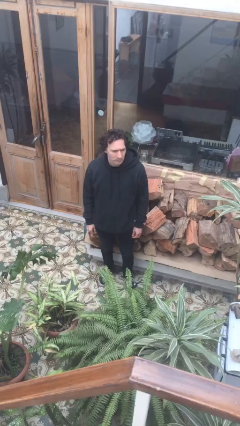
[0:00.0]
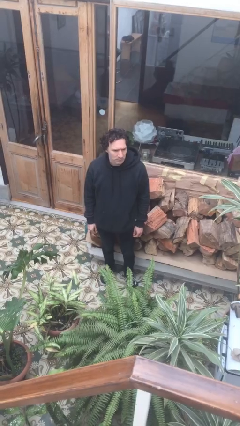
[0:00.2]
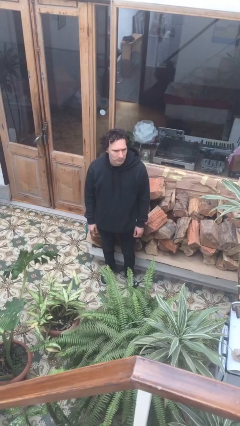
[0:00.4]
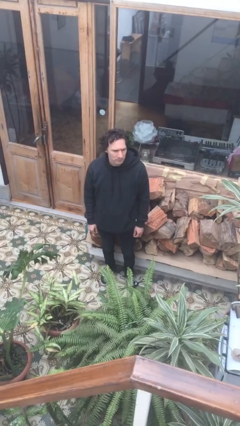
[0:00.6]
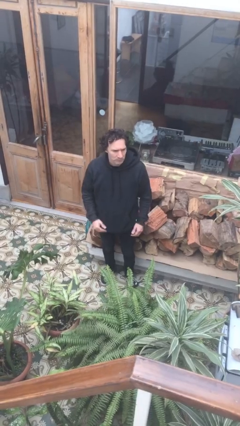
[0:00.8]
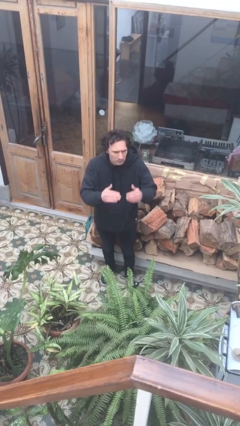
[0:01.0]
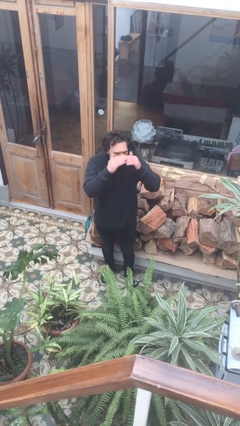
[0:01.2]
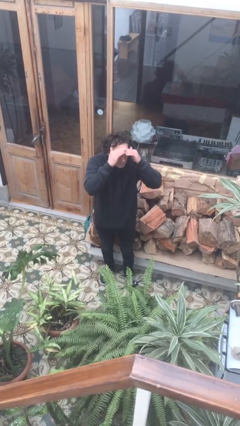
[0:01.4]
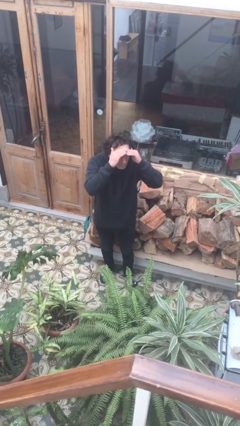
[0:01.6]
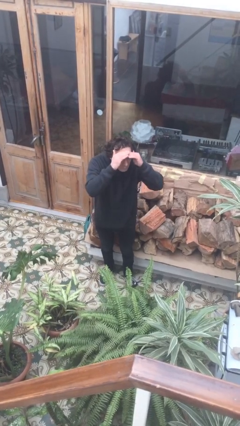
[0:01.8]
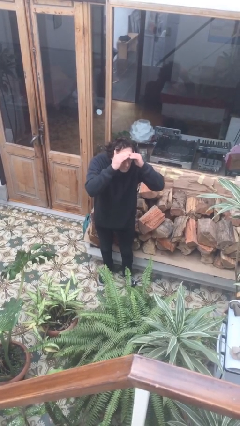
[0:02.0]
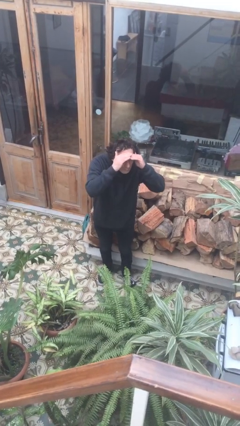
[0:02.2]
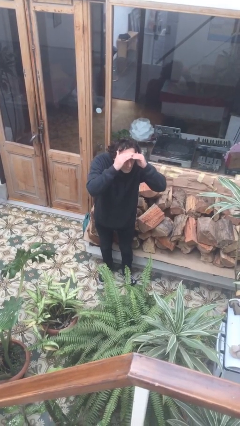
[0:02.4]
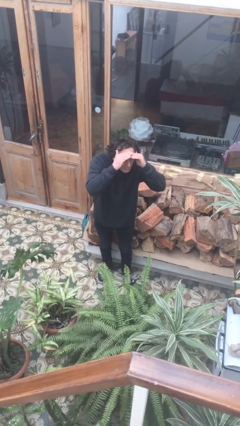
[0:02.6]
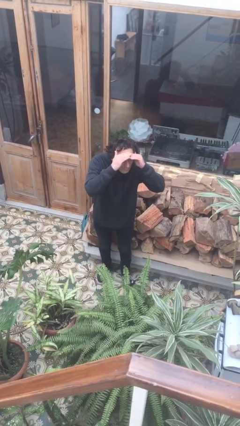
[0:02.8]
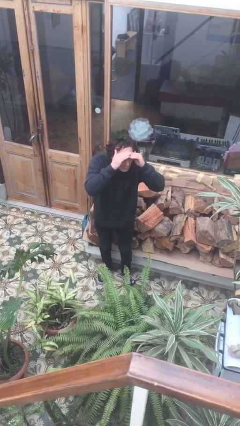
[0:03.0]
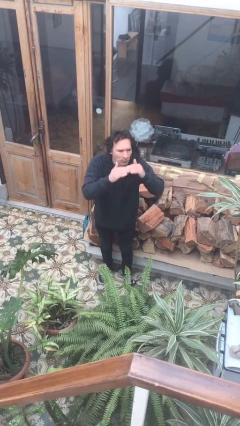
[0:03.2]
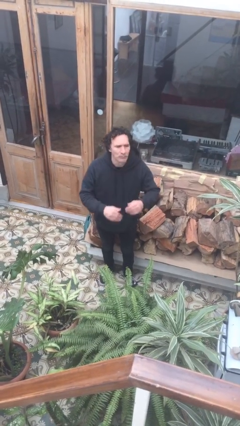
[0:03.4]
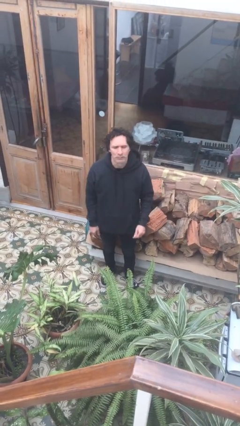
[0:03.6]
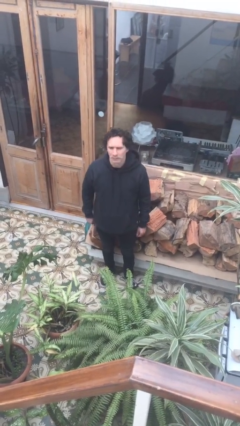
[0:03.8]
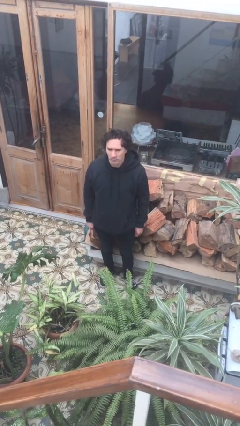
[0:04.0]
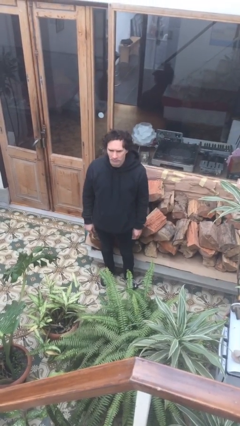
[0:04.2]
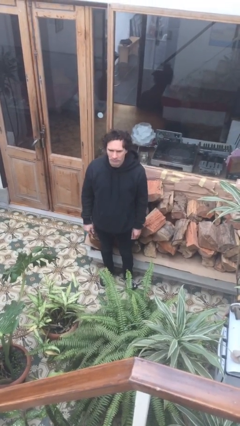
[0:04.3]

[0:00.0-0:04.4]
person shades eyes

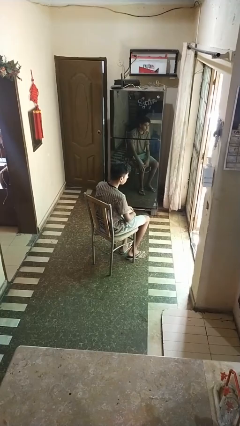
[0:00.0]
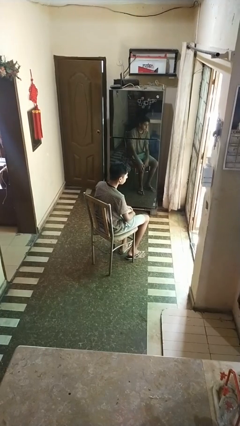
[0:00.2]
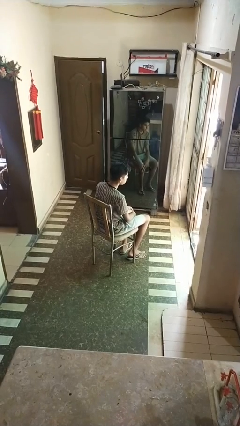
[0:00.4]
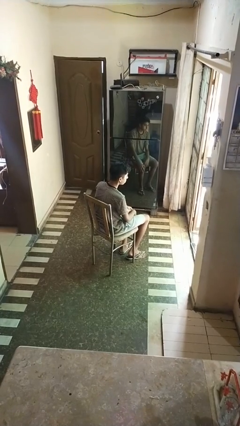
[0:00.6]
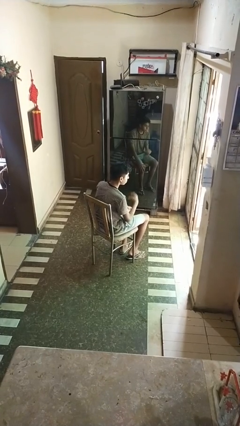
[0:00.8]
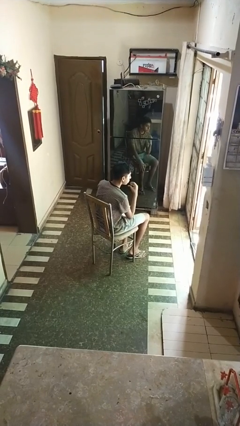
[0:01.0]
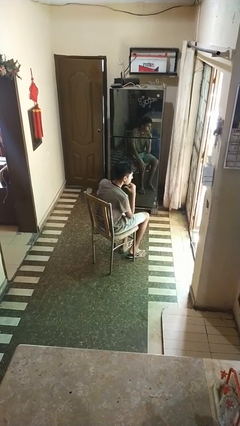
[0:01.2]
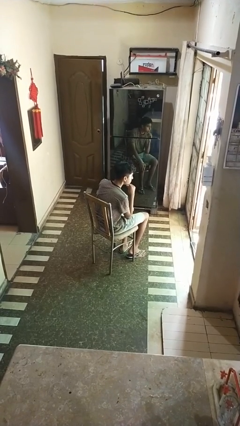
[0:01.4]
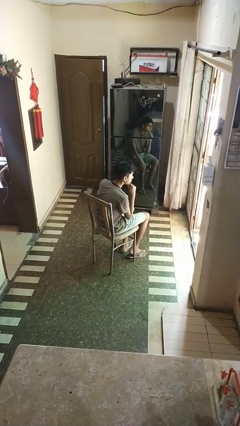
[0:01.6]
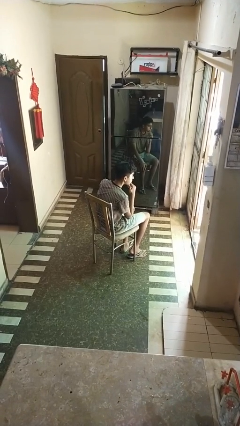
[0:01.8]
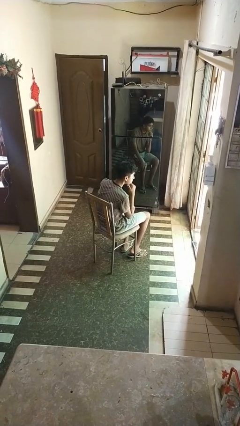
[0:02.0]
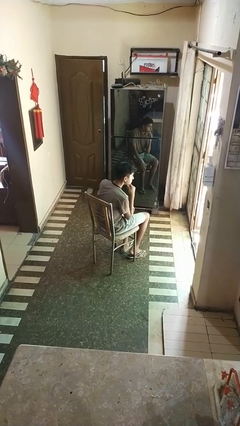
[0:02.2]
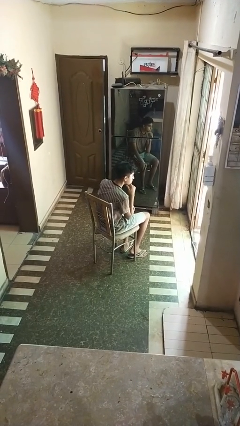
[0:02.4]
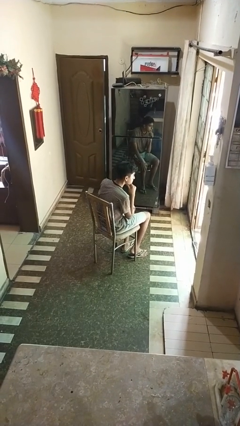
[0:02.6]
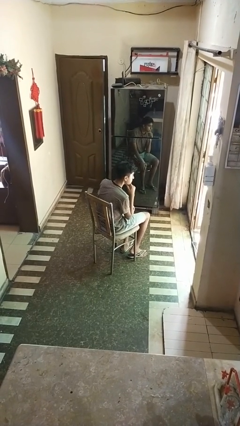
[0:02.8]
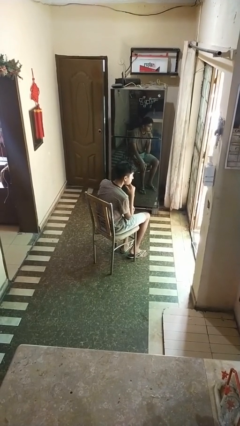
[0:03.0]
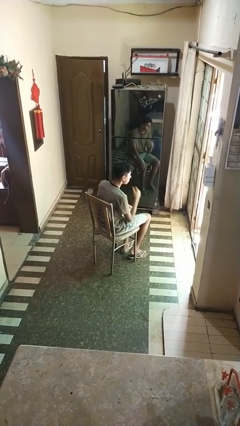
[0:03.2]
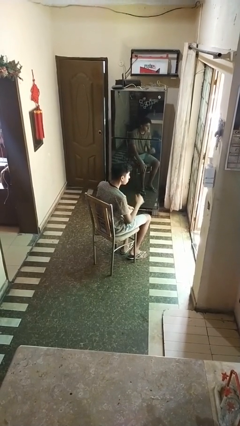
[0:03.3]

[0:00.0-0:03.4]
person strokes chin

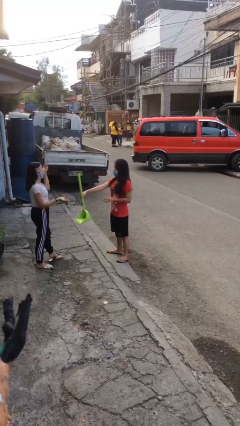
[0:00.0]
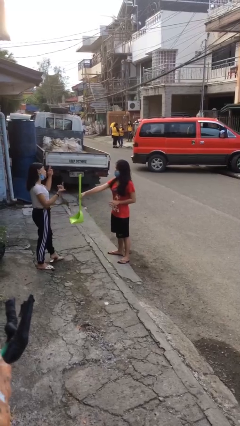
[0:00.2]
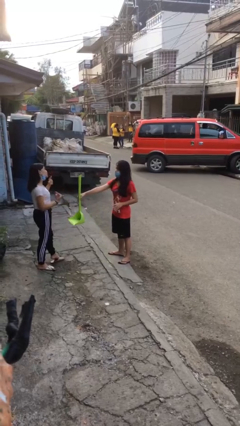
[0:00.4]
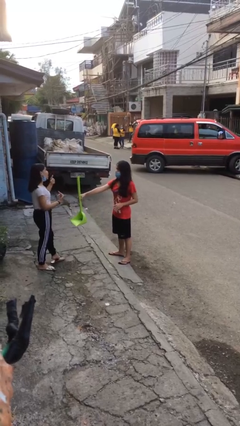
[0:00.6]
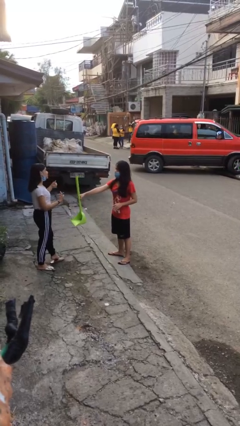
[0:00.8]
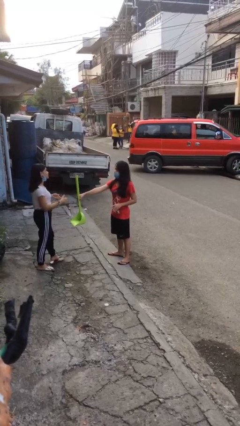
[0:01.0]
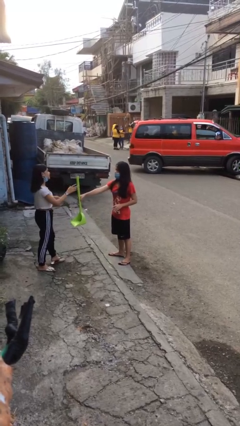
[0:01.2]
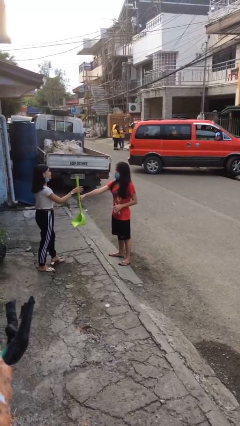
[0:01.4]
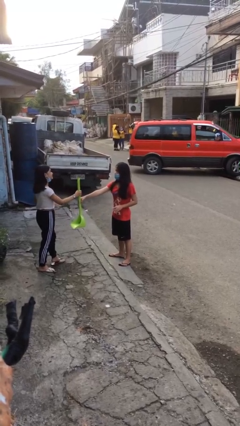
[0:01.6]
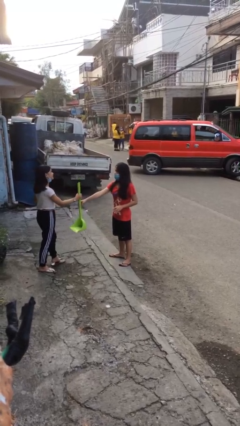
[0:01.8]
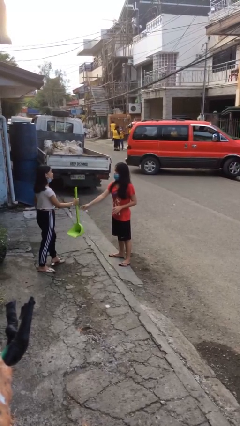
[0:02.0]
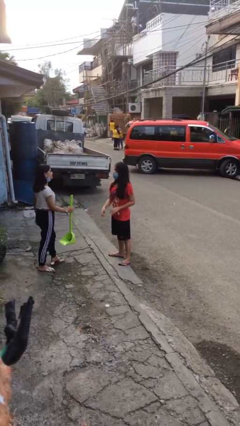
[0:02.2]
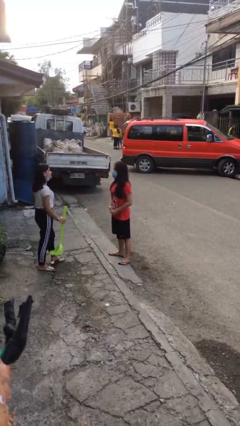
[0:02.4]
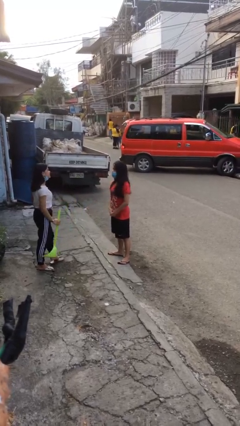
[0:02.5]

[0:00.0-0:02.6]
person transfers object to person

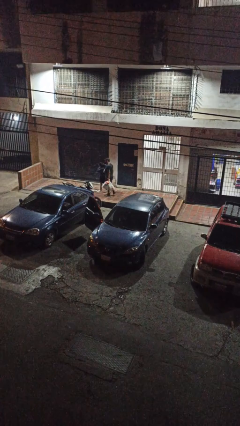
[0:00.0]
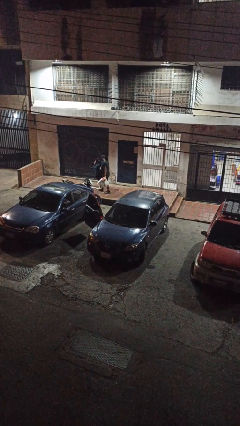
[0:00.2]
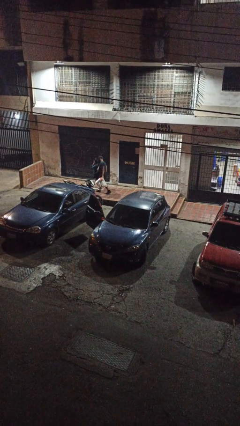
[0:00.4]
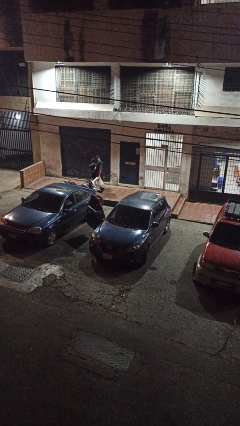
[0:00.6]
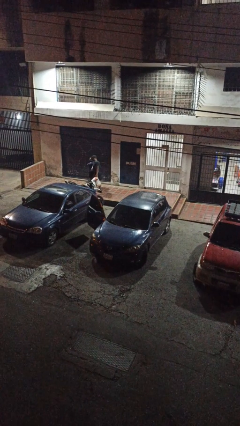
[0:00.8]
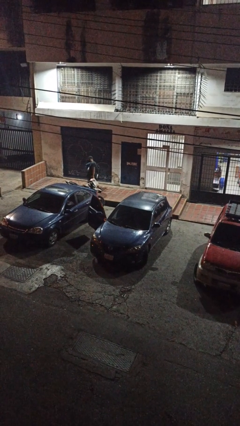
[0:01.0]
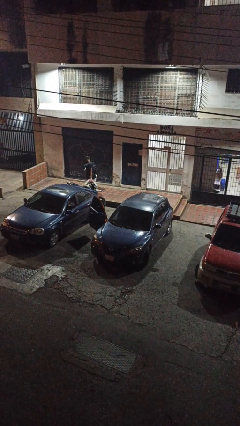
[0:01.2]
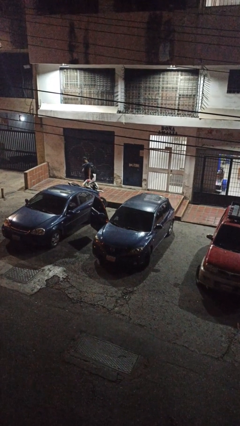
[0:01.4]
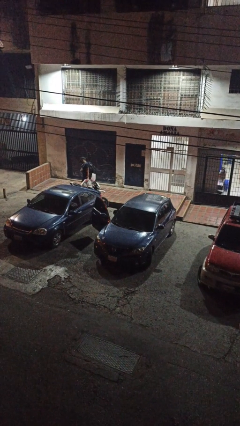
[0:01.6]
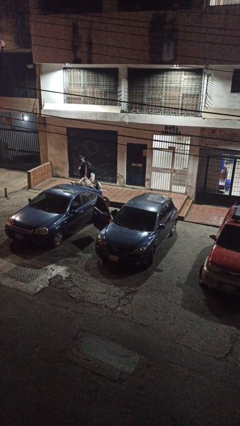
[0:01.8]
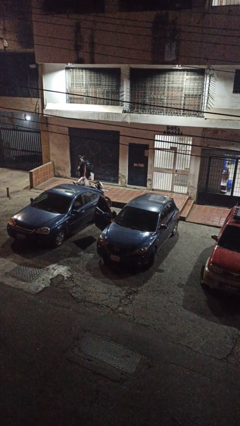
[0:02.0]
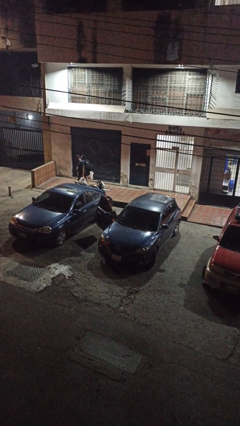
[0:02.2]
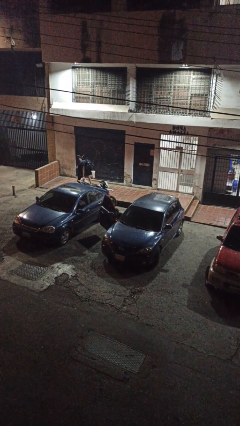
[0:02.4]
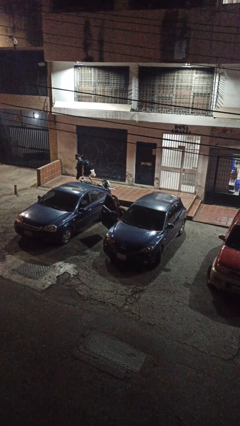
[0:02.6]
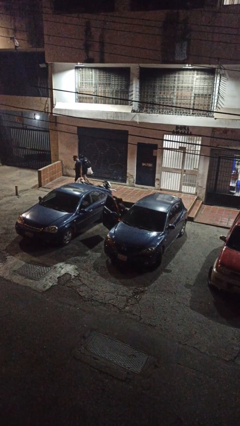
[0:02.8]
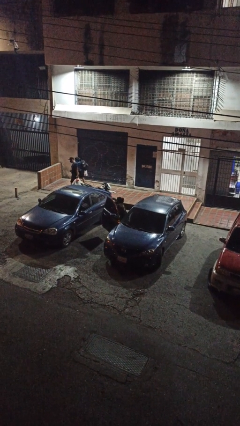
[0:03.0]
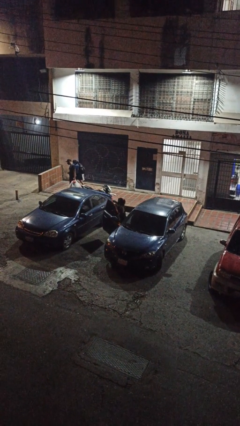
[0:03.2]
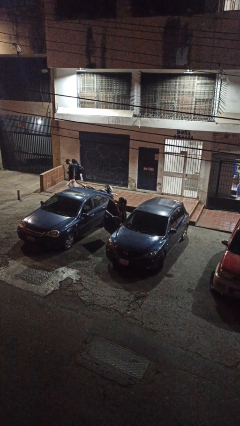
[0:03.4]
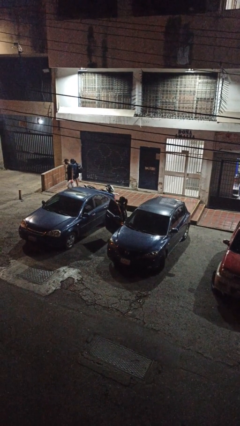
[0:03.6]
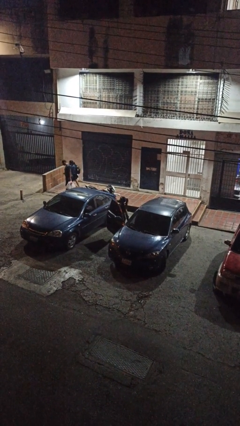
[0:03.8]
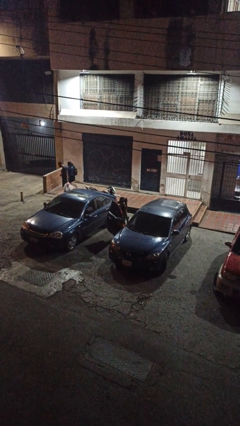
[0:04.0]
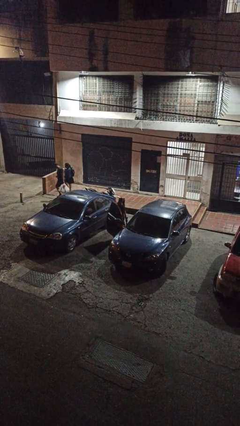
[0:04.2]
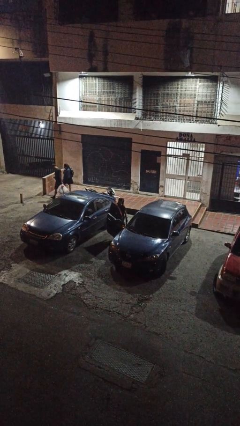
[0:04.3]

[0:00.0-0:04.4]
person exits car

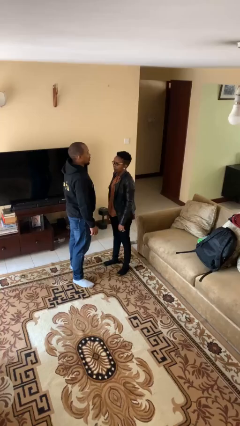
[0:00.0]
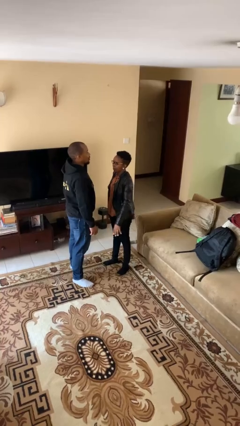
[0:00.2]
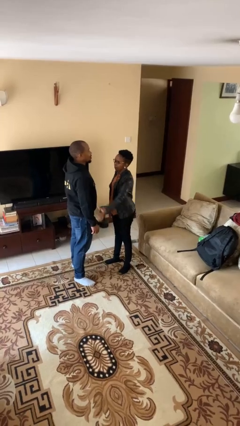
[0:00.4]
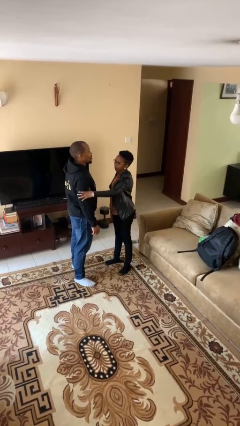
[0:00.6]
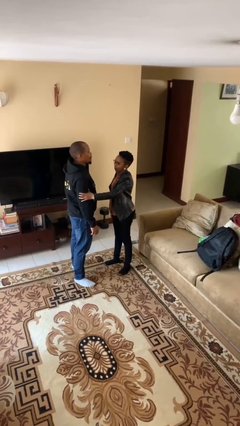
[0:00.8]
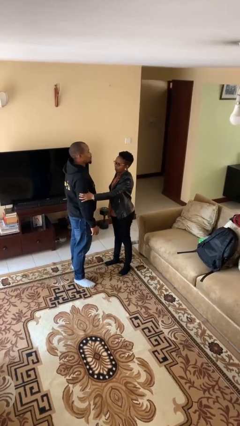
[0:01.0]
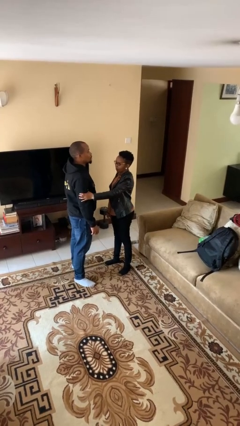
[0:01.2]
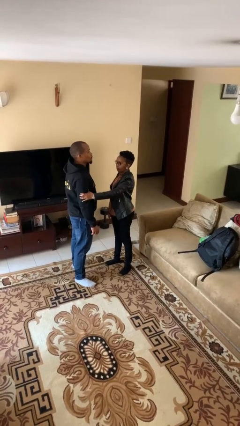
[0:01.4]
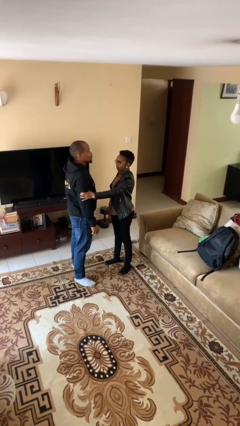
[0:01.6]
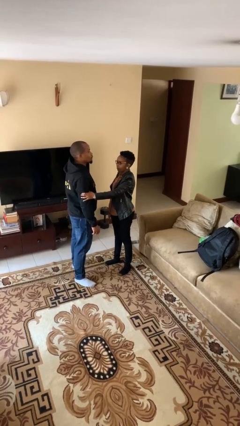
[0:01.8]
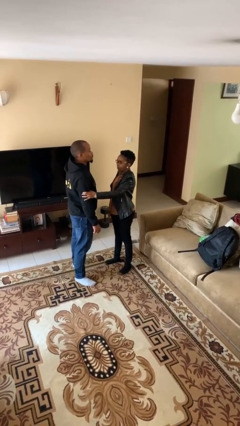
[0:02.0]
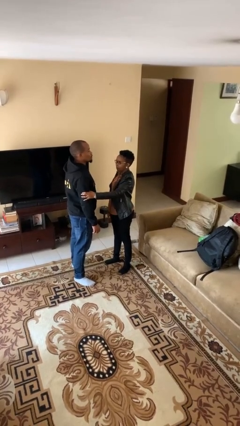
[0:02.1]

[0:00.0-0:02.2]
person grabs person by bicep

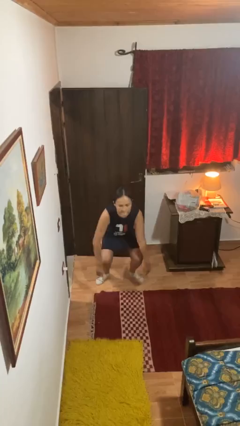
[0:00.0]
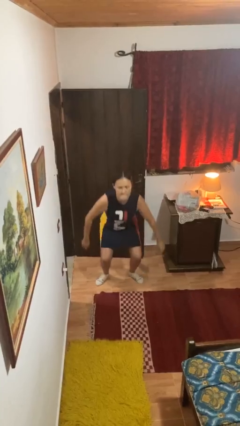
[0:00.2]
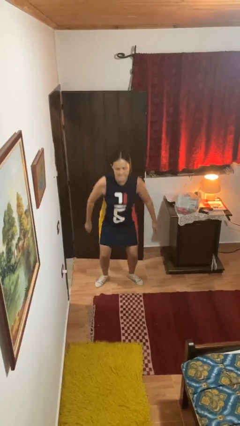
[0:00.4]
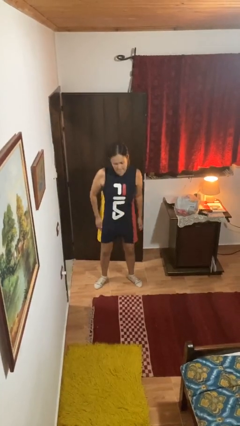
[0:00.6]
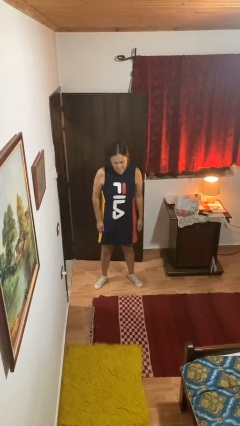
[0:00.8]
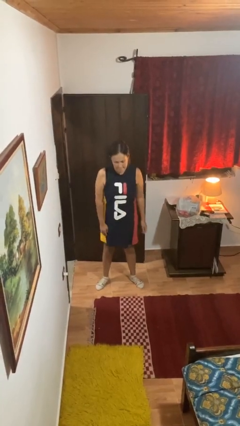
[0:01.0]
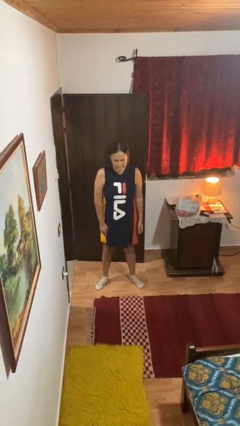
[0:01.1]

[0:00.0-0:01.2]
person stands up
